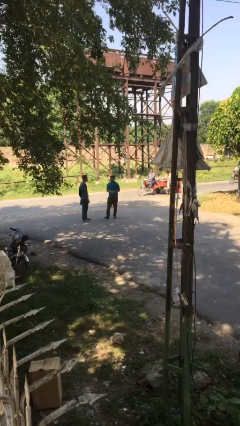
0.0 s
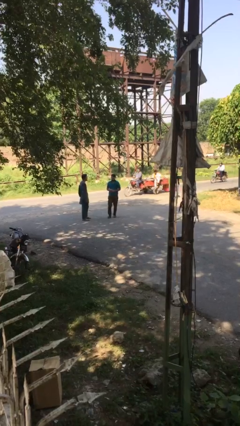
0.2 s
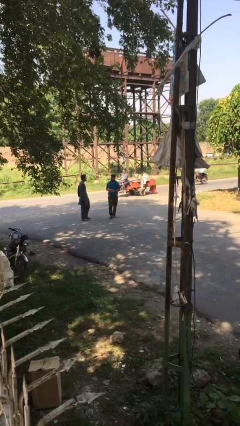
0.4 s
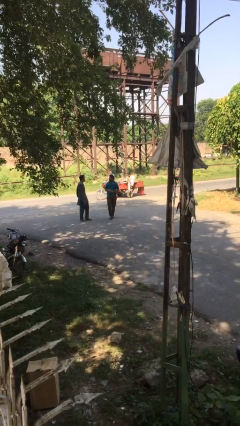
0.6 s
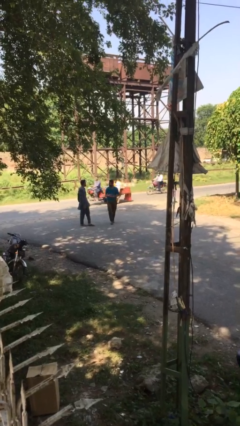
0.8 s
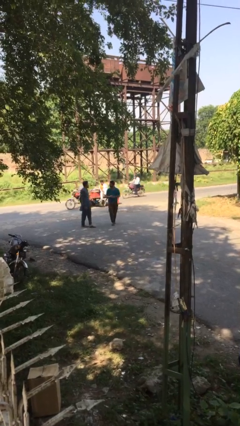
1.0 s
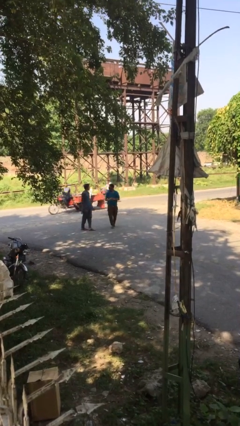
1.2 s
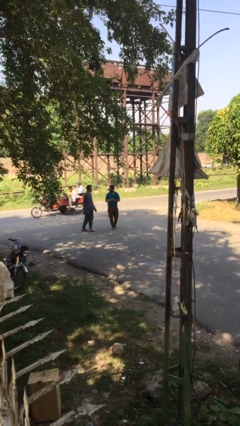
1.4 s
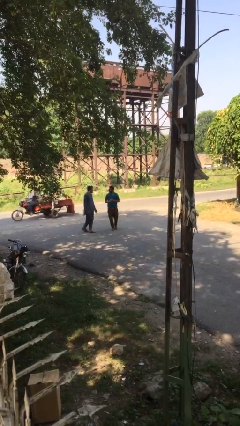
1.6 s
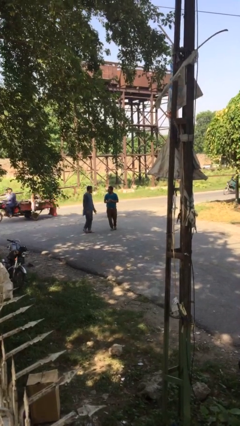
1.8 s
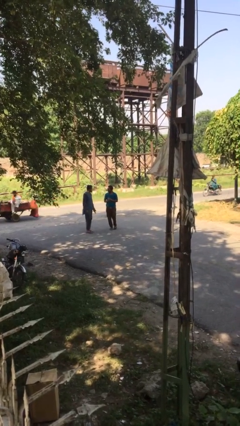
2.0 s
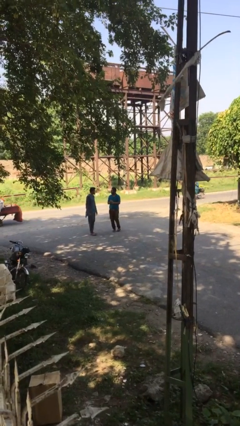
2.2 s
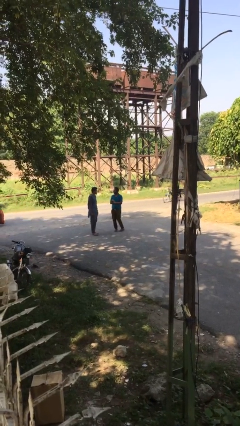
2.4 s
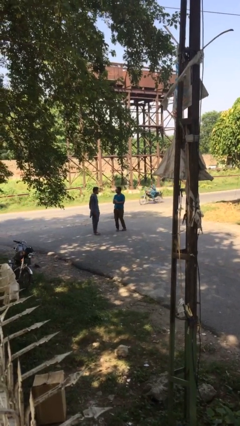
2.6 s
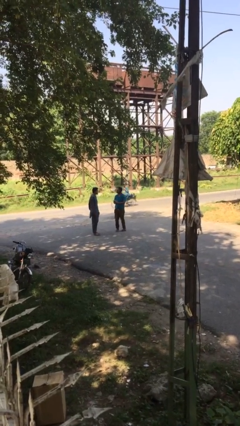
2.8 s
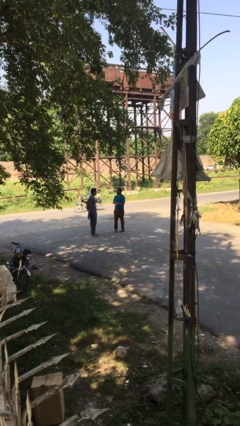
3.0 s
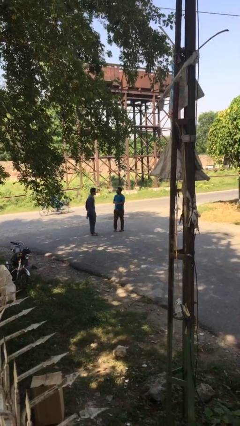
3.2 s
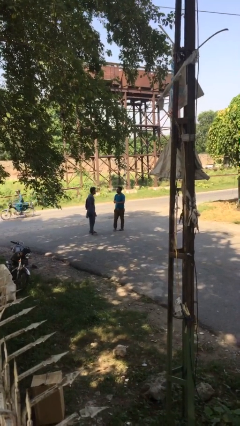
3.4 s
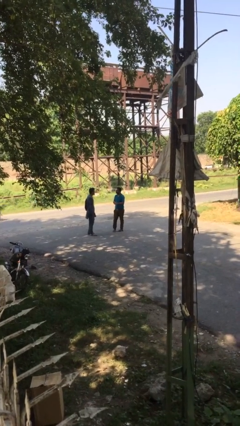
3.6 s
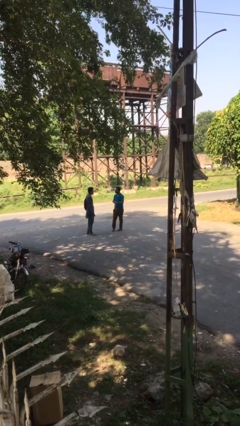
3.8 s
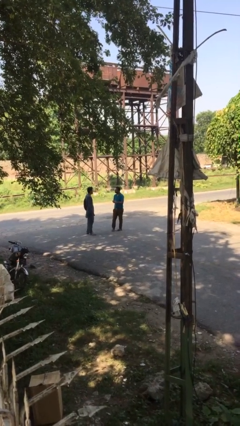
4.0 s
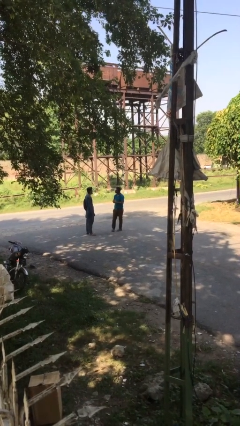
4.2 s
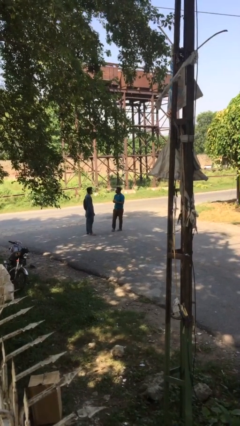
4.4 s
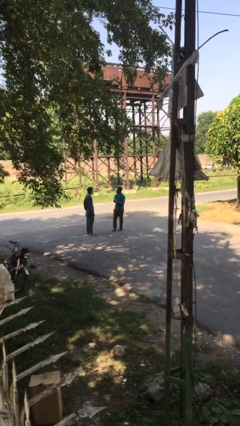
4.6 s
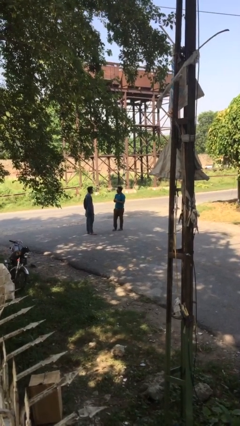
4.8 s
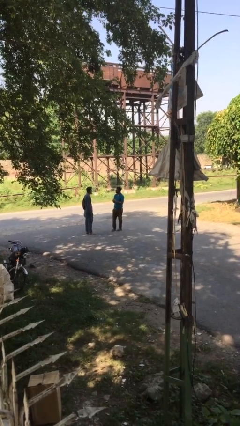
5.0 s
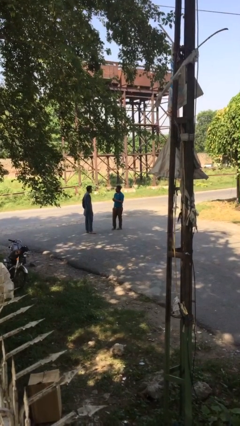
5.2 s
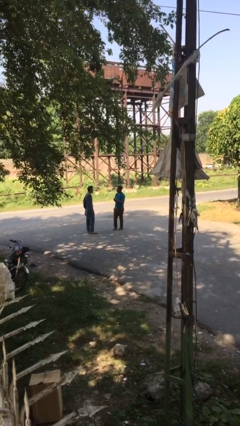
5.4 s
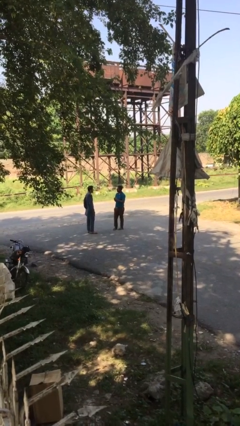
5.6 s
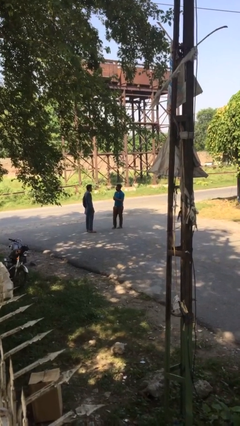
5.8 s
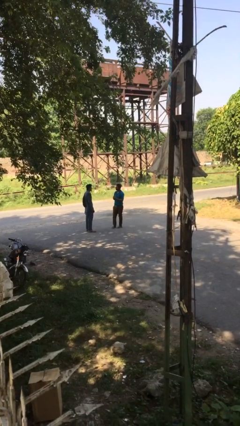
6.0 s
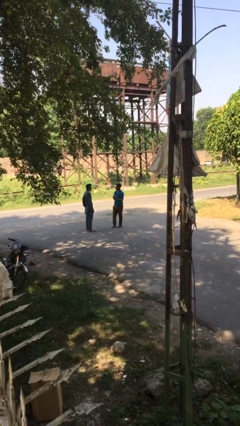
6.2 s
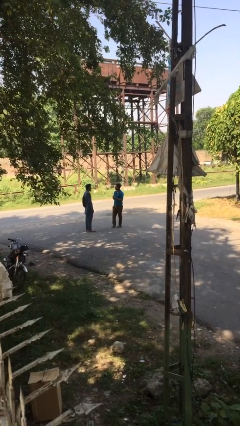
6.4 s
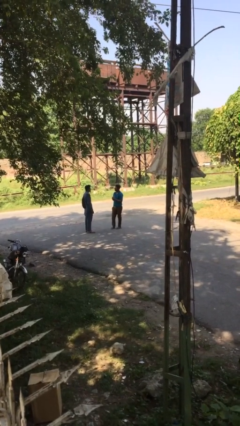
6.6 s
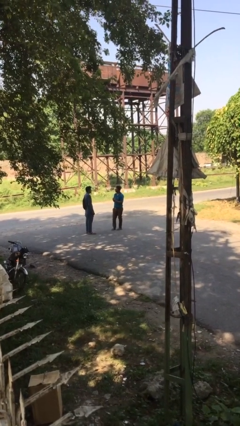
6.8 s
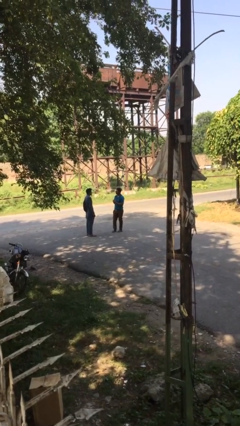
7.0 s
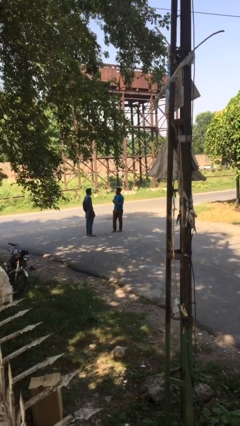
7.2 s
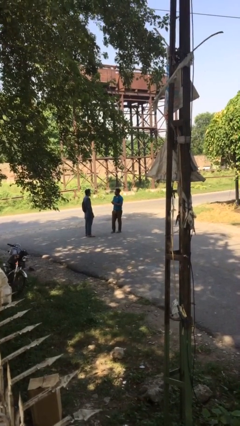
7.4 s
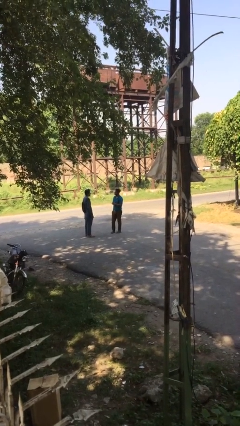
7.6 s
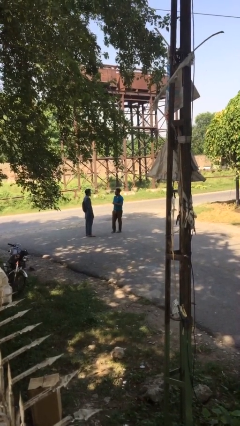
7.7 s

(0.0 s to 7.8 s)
person talks to person

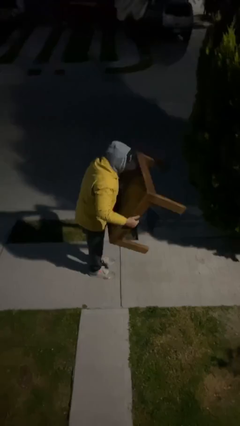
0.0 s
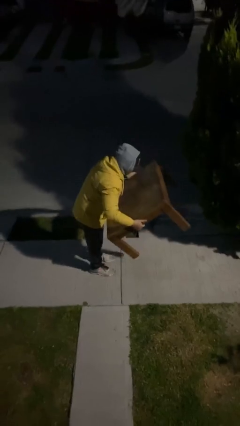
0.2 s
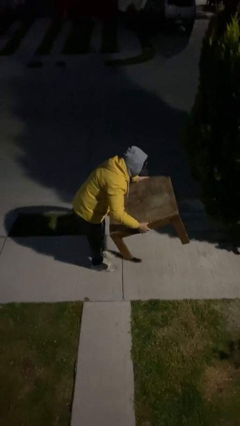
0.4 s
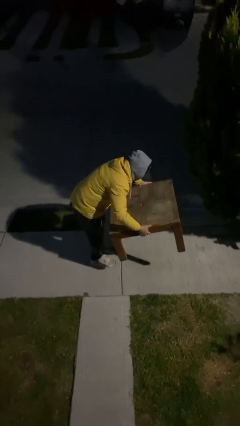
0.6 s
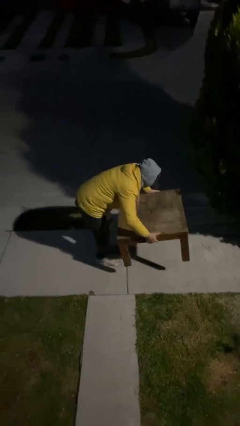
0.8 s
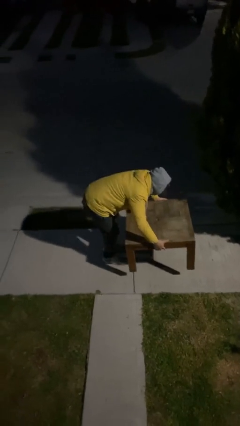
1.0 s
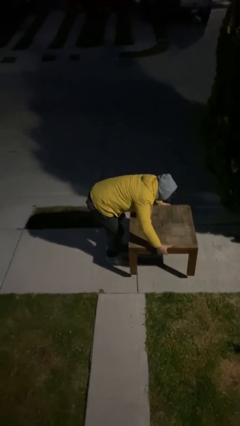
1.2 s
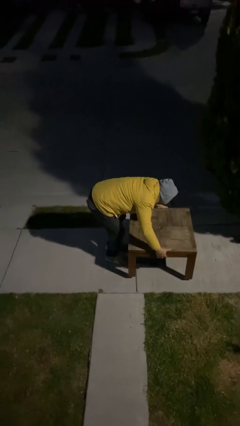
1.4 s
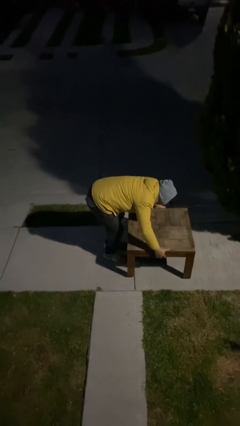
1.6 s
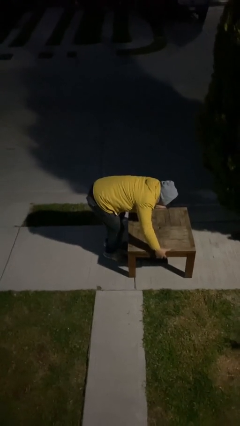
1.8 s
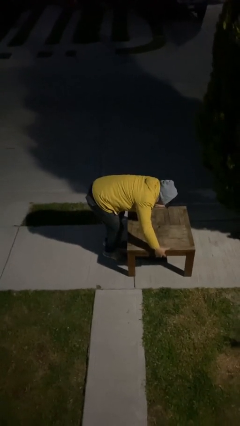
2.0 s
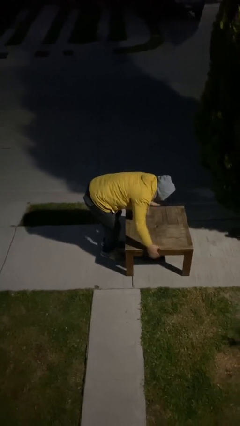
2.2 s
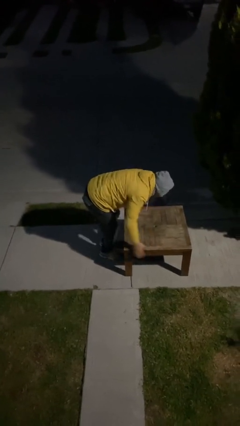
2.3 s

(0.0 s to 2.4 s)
person puts down object on floor

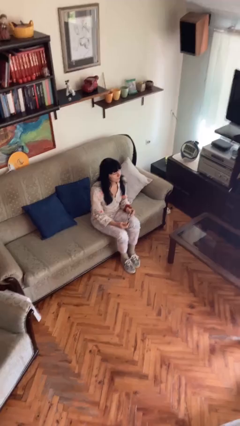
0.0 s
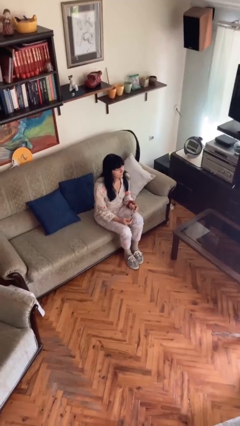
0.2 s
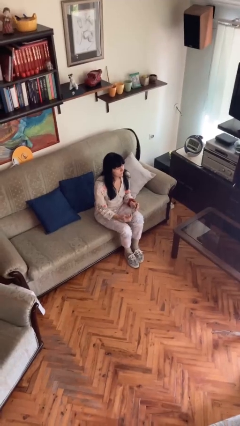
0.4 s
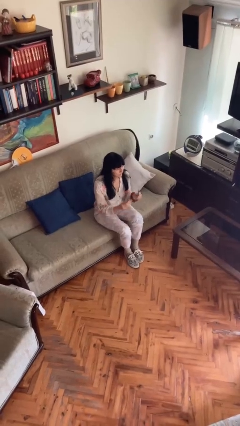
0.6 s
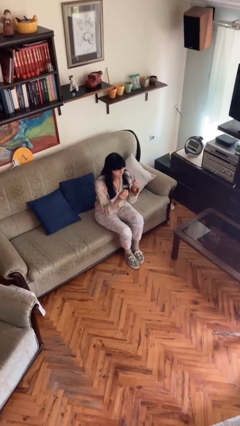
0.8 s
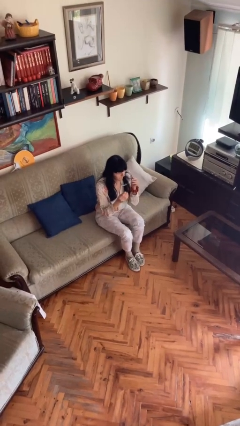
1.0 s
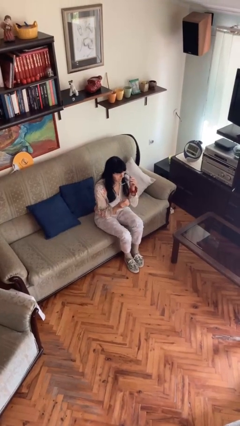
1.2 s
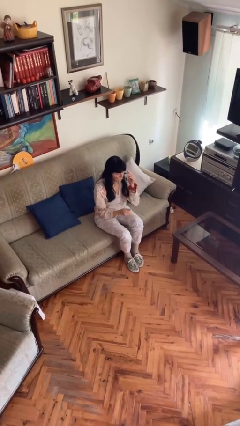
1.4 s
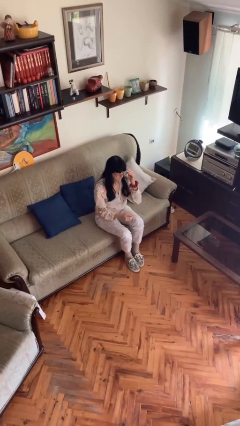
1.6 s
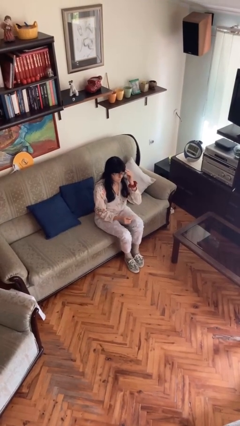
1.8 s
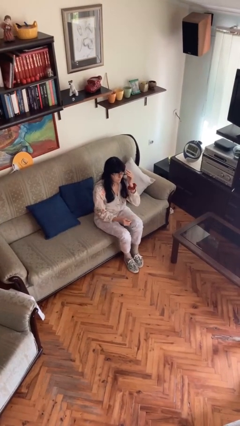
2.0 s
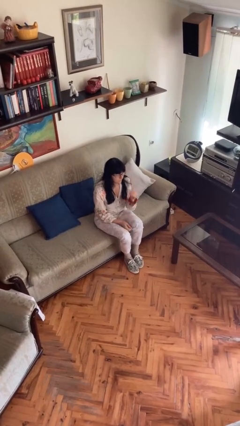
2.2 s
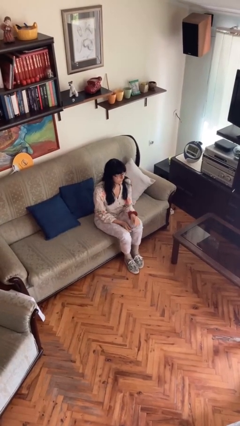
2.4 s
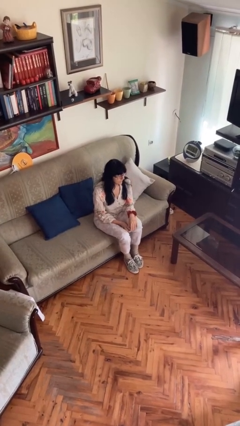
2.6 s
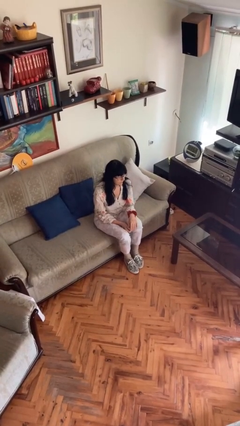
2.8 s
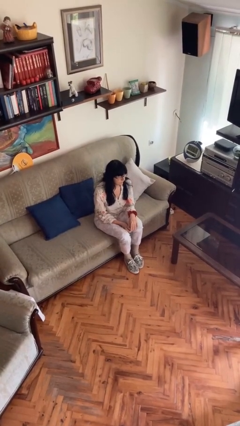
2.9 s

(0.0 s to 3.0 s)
person puts on glasses

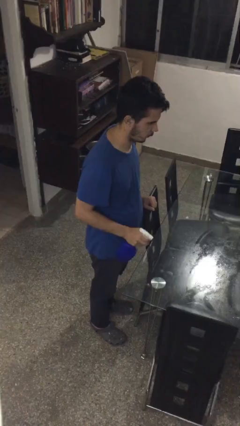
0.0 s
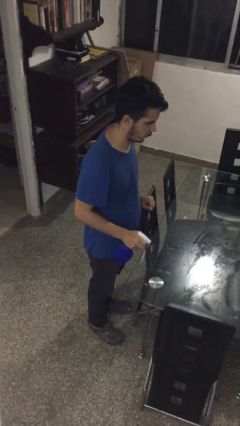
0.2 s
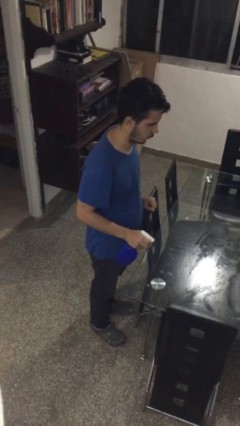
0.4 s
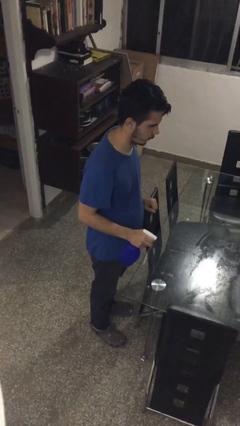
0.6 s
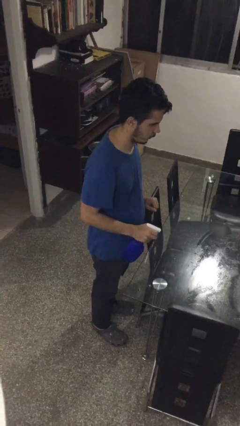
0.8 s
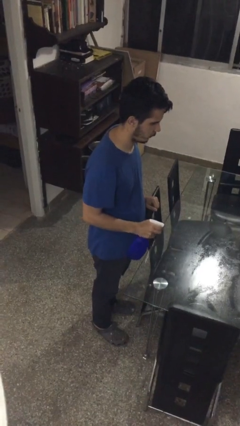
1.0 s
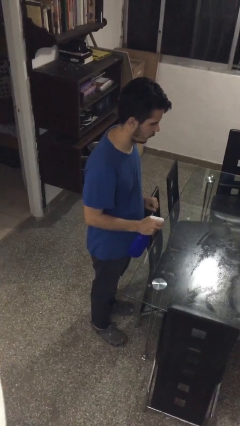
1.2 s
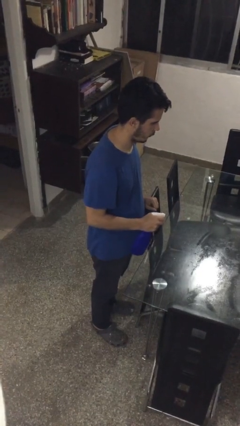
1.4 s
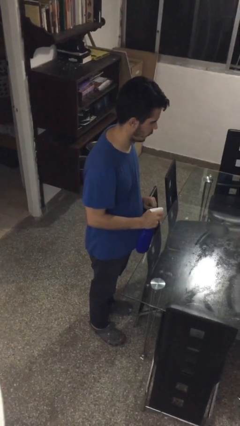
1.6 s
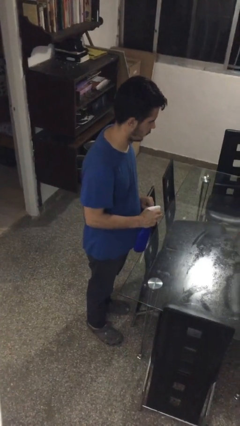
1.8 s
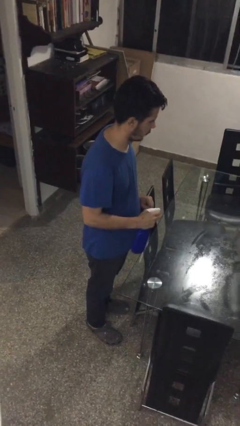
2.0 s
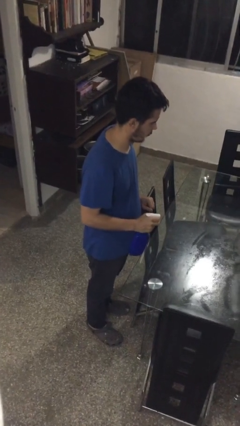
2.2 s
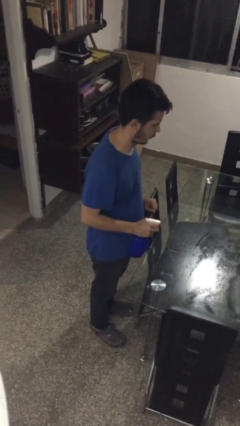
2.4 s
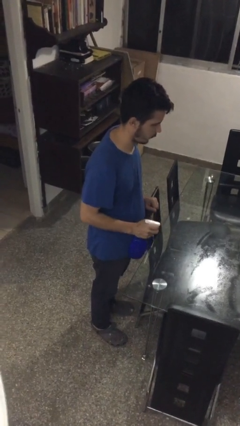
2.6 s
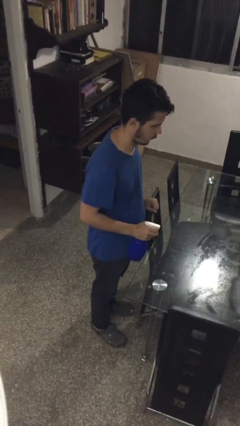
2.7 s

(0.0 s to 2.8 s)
person sprays from bottle

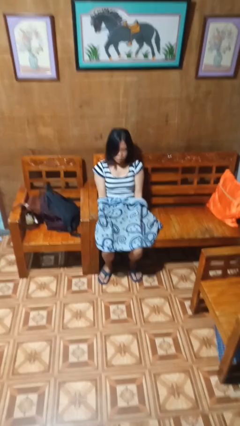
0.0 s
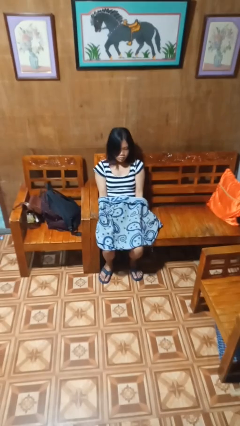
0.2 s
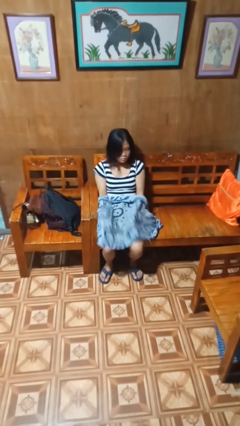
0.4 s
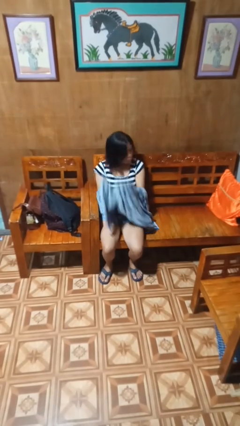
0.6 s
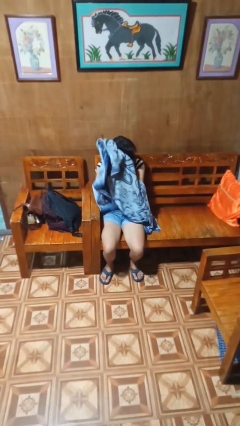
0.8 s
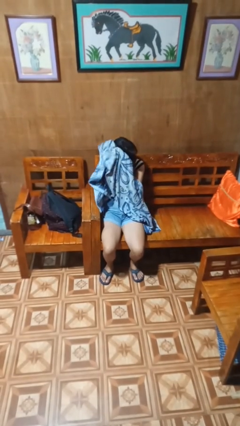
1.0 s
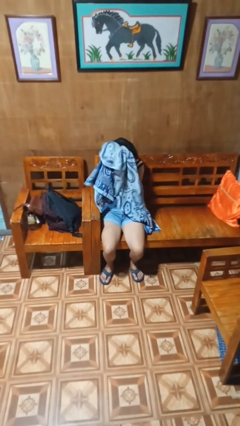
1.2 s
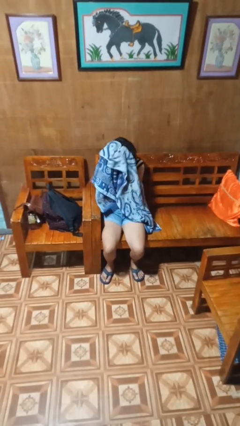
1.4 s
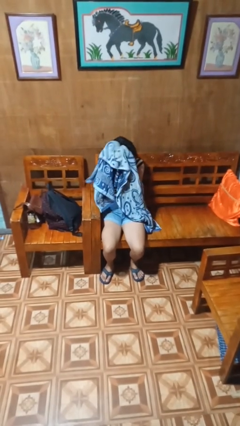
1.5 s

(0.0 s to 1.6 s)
person dries hair with towel
